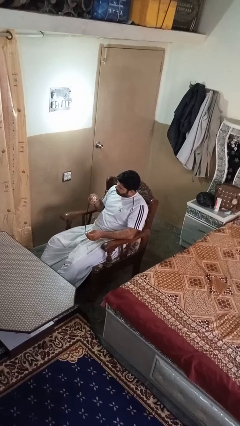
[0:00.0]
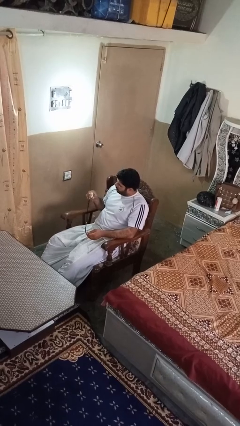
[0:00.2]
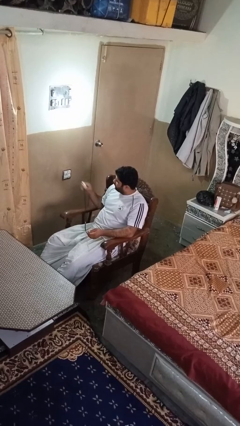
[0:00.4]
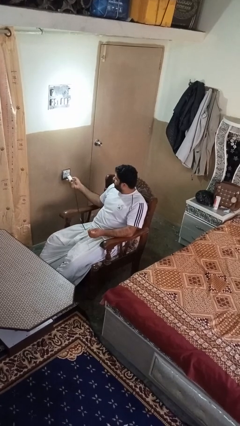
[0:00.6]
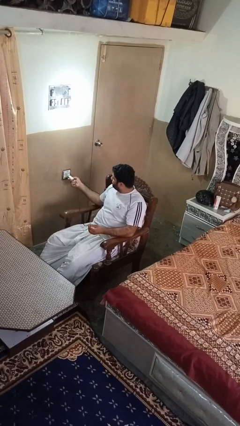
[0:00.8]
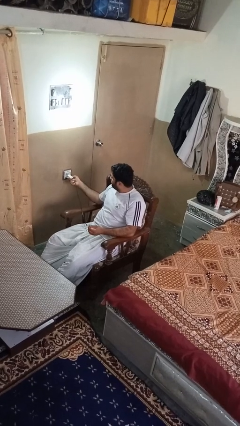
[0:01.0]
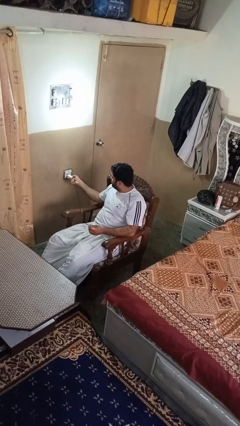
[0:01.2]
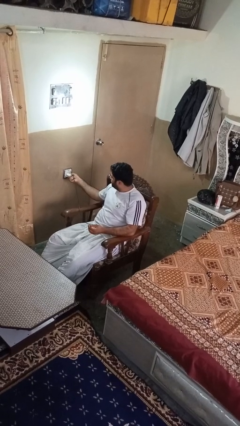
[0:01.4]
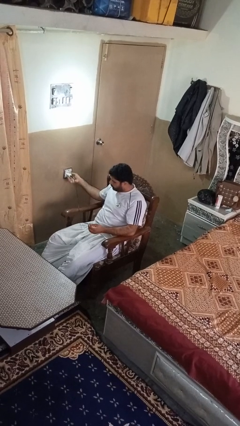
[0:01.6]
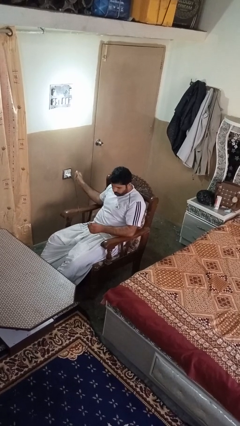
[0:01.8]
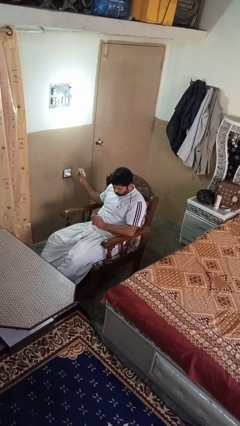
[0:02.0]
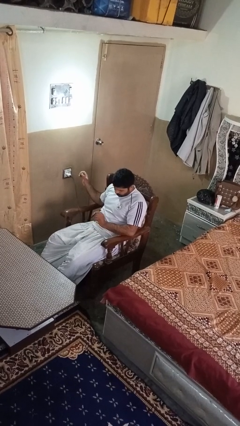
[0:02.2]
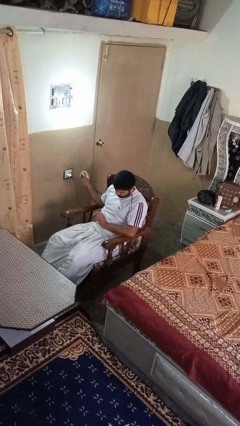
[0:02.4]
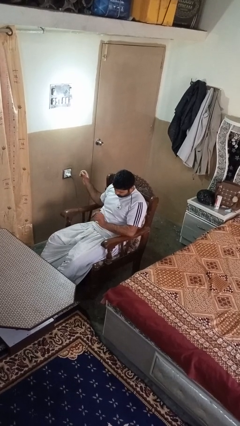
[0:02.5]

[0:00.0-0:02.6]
person plugs into electrical socket

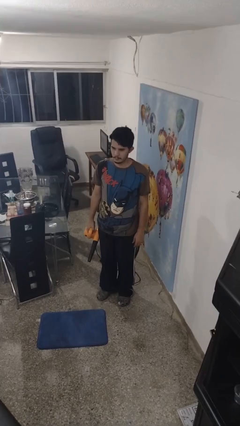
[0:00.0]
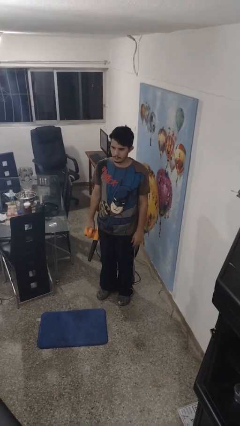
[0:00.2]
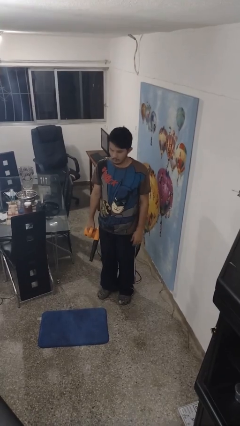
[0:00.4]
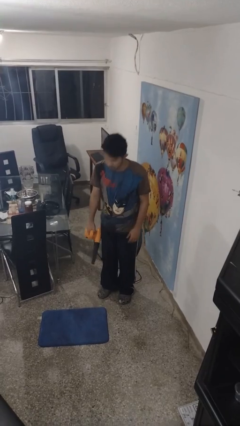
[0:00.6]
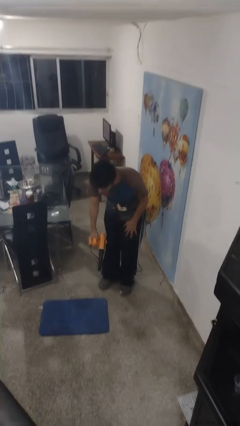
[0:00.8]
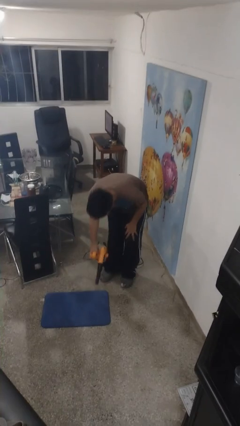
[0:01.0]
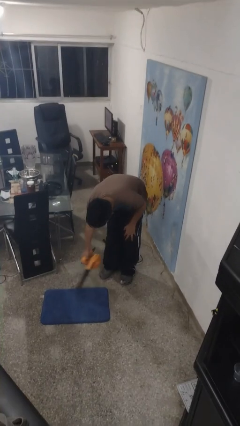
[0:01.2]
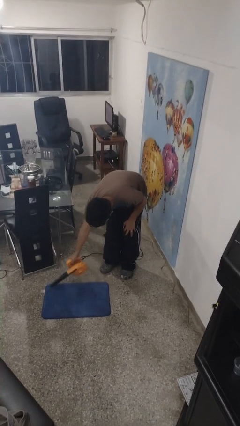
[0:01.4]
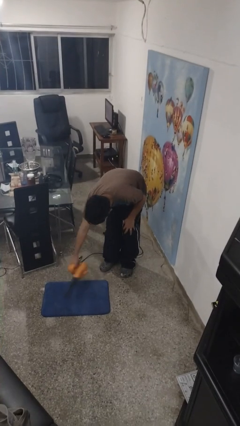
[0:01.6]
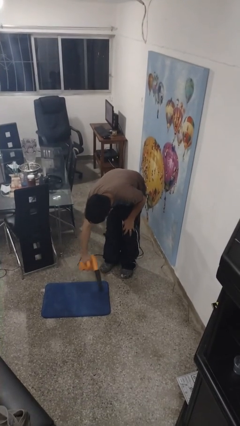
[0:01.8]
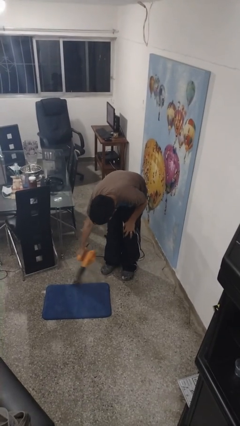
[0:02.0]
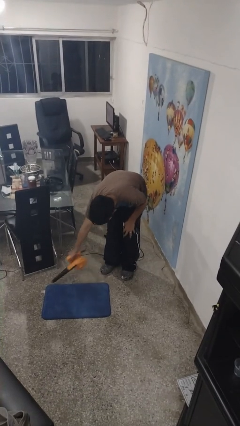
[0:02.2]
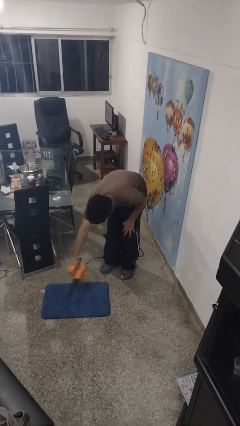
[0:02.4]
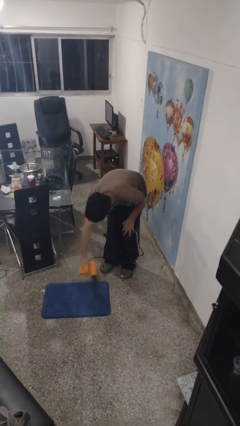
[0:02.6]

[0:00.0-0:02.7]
person vacuums carpet

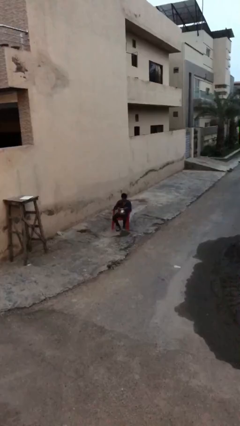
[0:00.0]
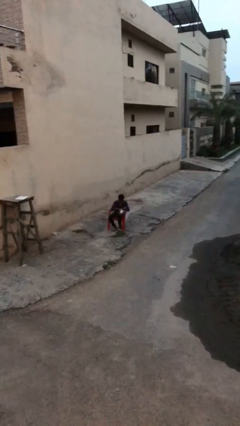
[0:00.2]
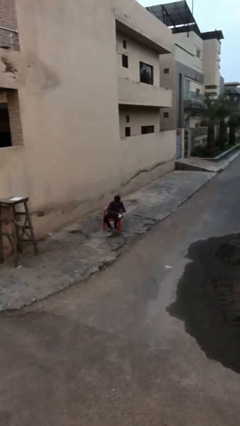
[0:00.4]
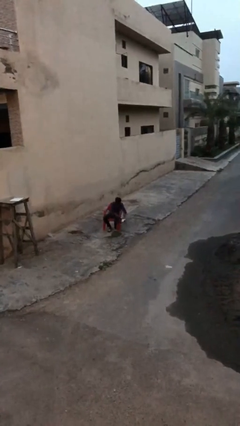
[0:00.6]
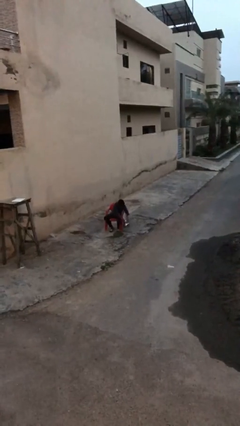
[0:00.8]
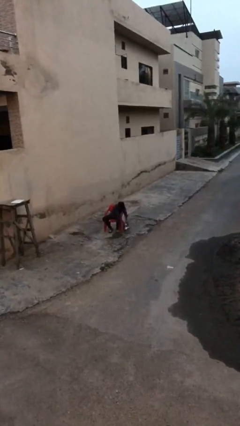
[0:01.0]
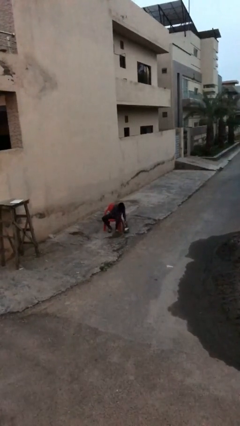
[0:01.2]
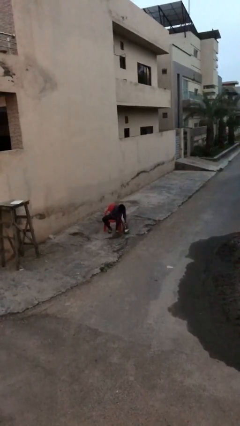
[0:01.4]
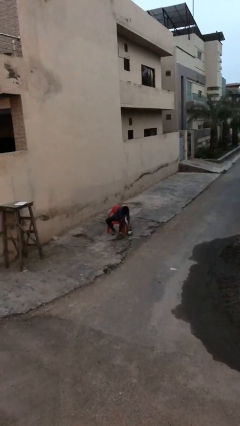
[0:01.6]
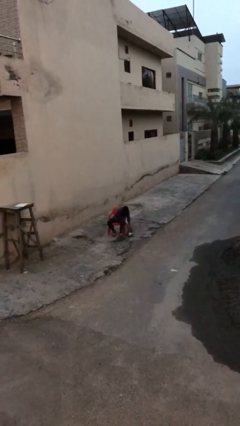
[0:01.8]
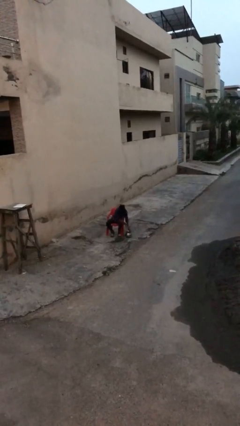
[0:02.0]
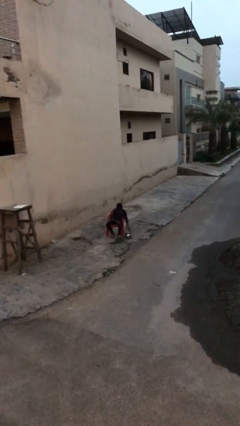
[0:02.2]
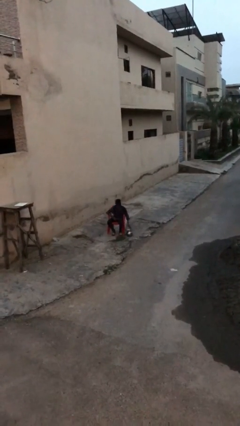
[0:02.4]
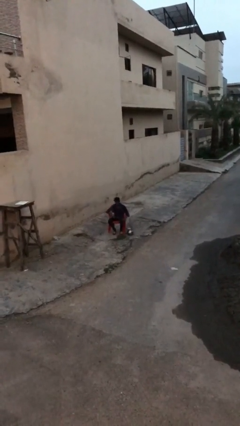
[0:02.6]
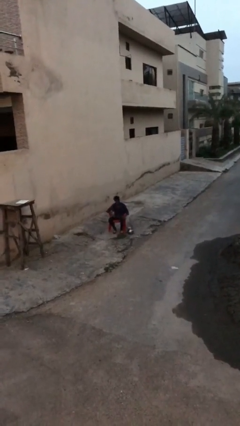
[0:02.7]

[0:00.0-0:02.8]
person puts down object on floor

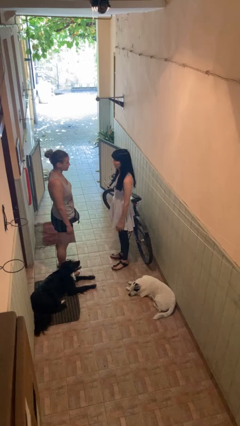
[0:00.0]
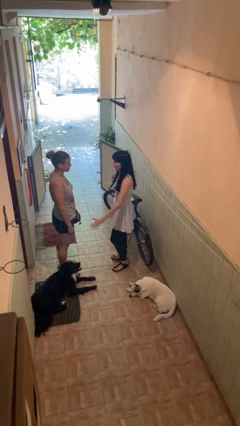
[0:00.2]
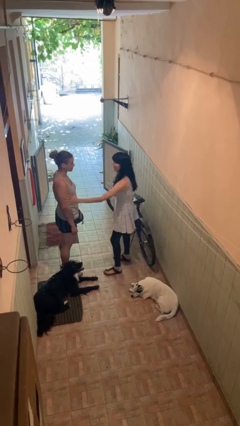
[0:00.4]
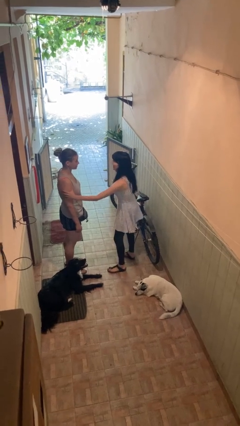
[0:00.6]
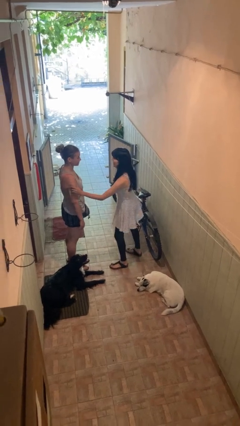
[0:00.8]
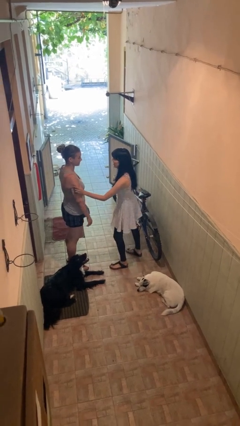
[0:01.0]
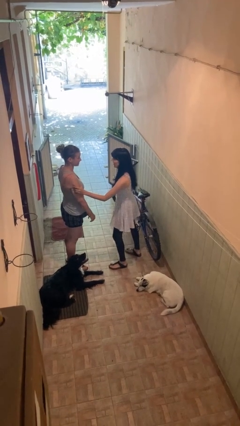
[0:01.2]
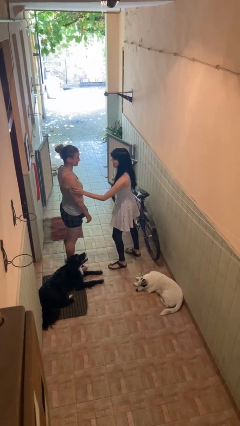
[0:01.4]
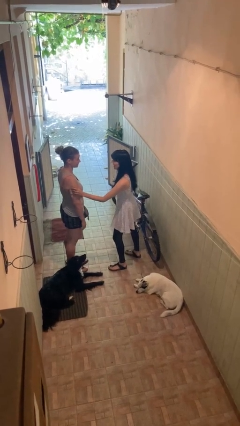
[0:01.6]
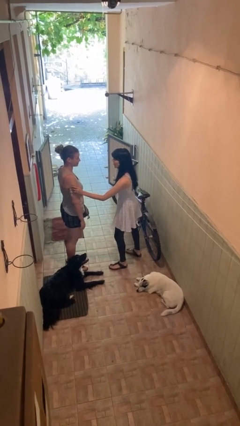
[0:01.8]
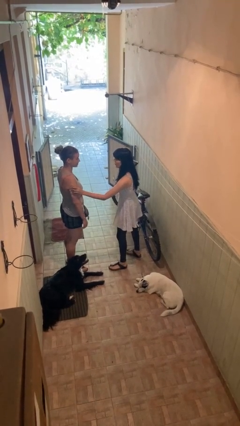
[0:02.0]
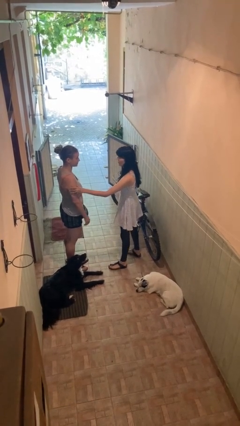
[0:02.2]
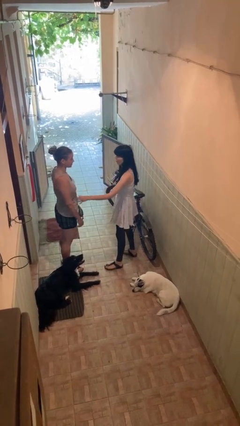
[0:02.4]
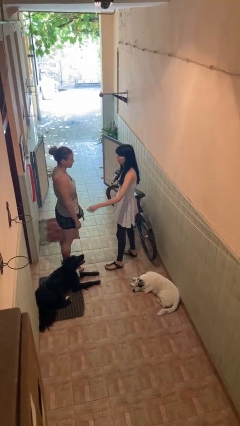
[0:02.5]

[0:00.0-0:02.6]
person grabs person by bicep

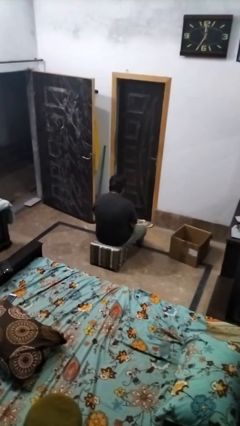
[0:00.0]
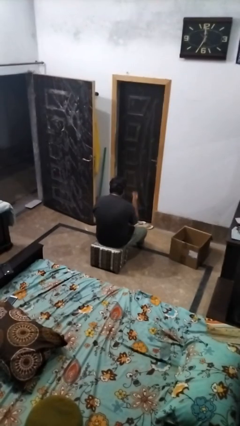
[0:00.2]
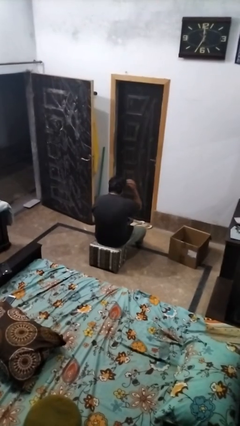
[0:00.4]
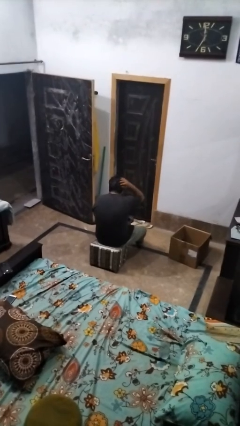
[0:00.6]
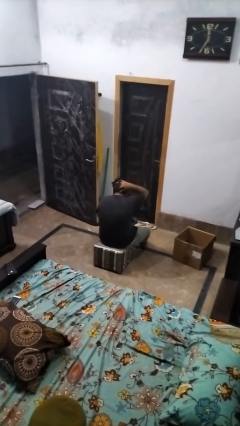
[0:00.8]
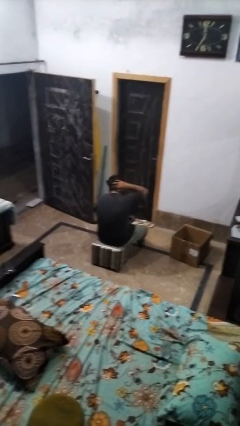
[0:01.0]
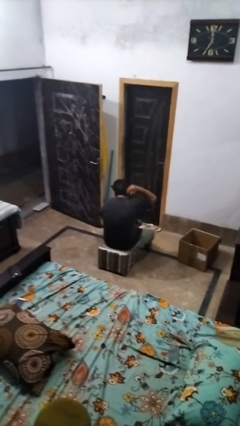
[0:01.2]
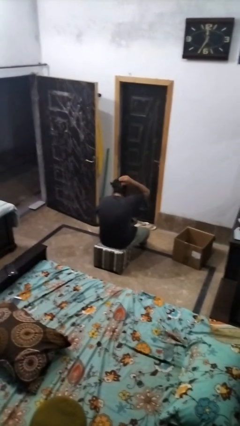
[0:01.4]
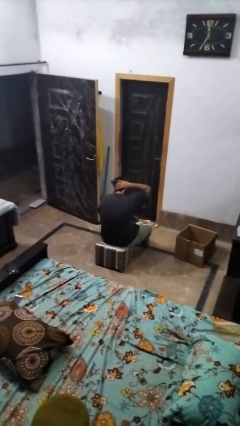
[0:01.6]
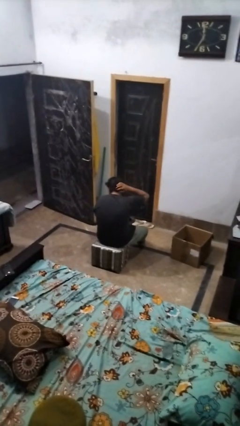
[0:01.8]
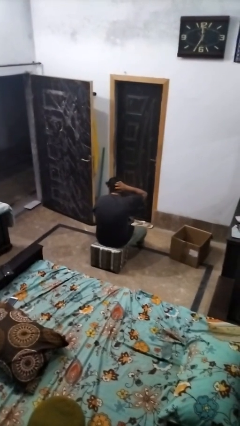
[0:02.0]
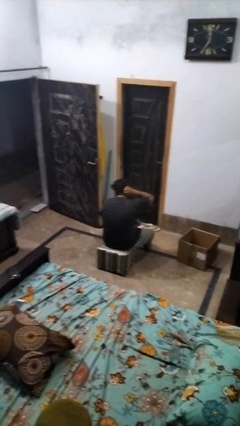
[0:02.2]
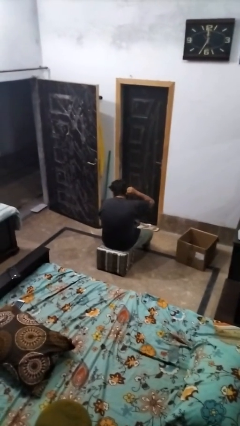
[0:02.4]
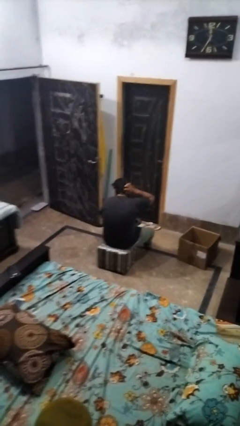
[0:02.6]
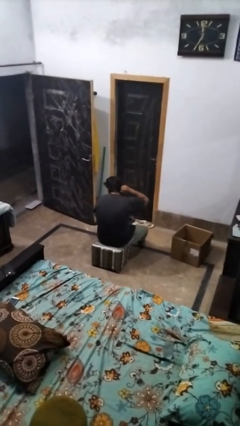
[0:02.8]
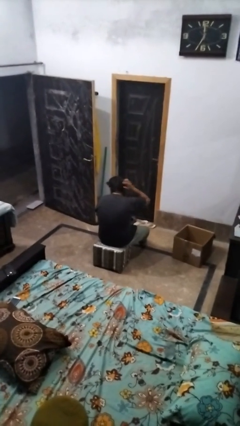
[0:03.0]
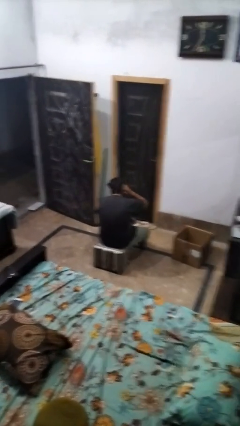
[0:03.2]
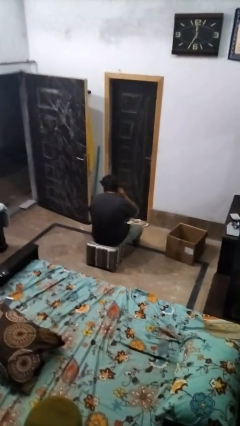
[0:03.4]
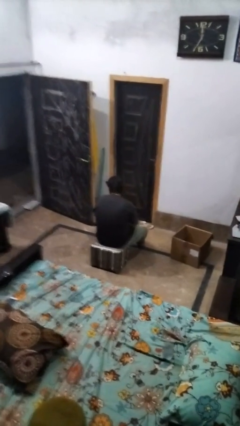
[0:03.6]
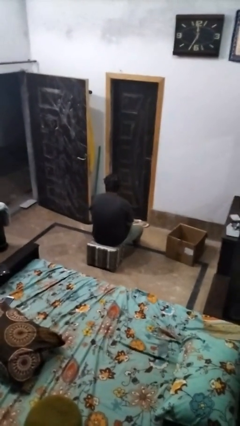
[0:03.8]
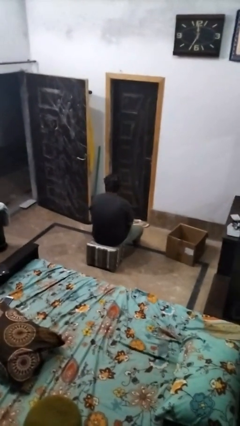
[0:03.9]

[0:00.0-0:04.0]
person strokes hair

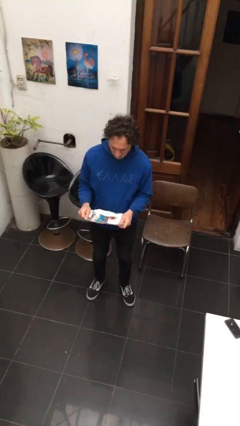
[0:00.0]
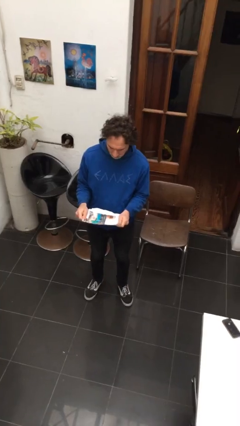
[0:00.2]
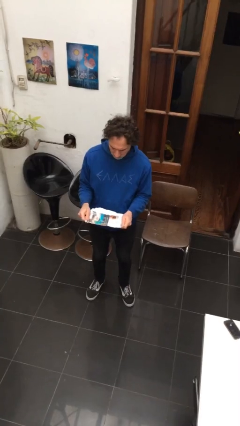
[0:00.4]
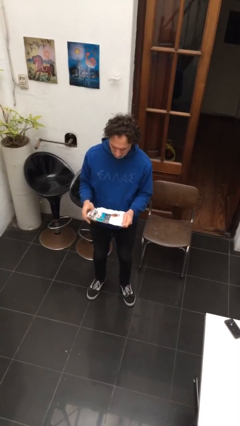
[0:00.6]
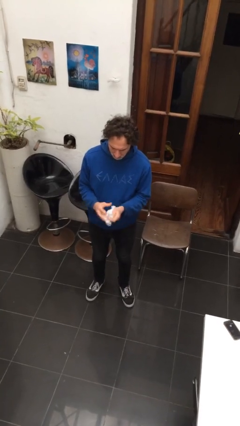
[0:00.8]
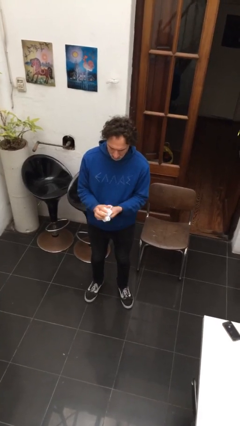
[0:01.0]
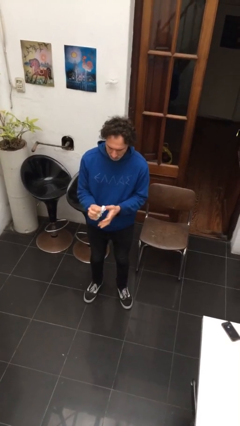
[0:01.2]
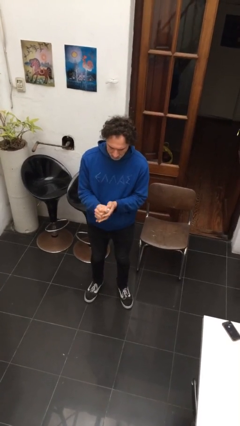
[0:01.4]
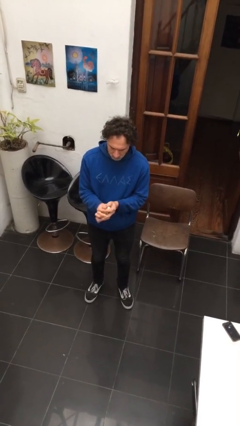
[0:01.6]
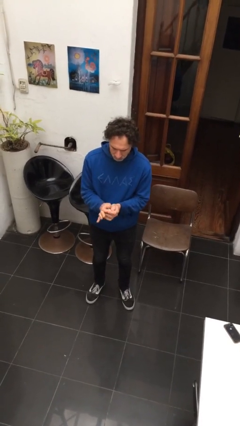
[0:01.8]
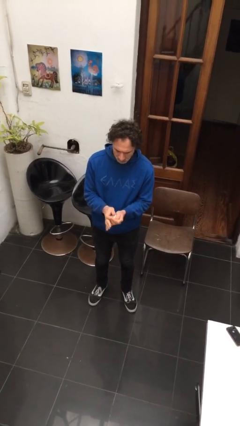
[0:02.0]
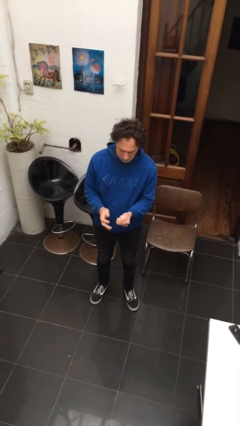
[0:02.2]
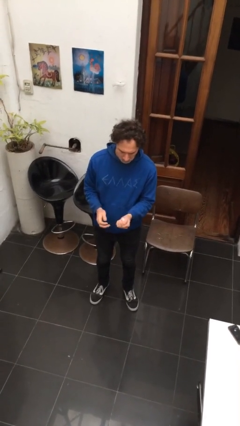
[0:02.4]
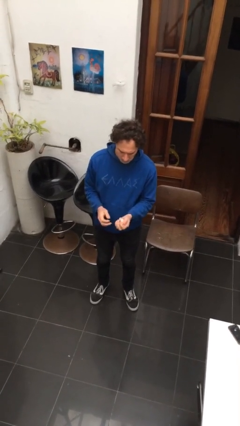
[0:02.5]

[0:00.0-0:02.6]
person crumples paper
